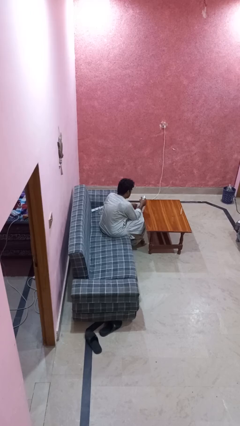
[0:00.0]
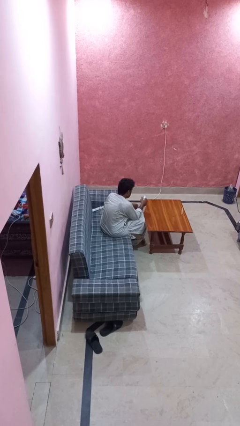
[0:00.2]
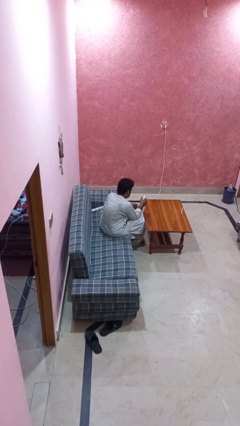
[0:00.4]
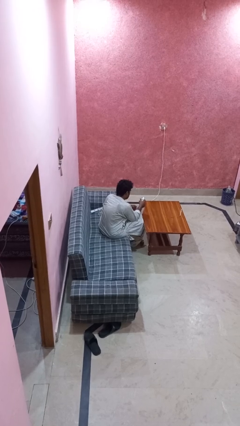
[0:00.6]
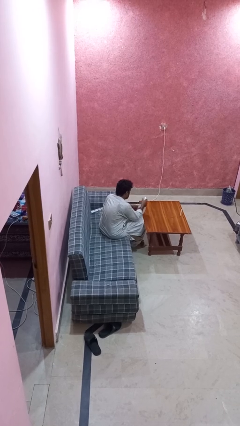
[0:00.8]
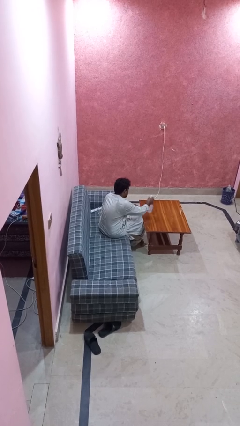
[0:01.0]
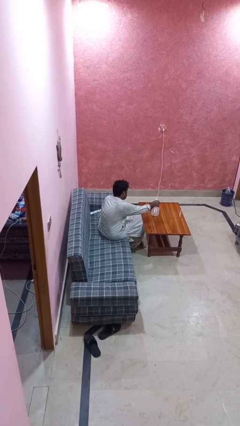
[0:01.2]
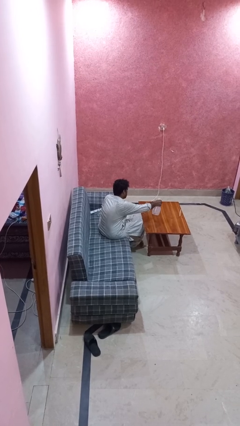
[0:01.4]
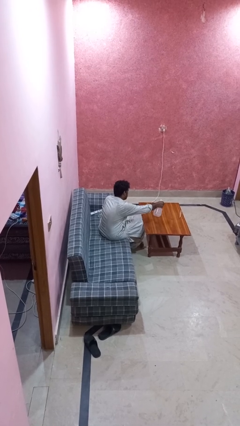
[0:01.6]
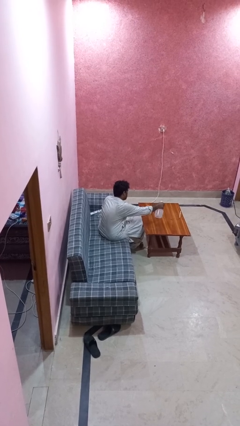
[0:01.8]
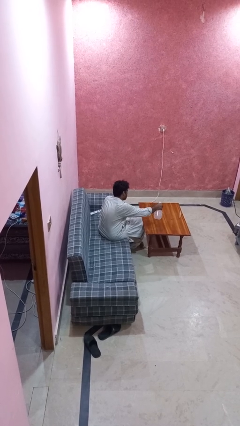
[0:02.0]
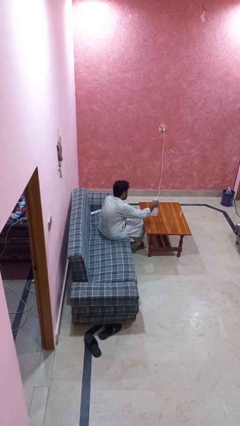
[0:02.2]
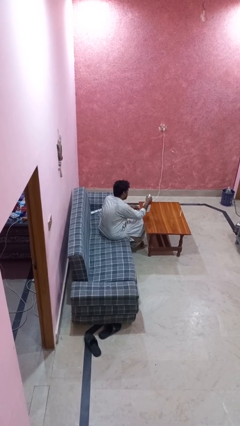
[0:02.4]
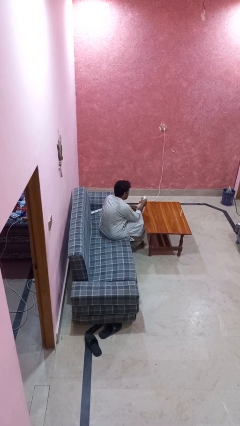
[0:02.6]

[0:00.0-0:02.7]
person sprays from bottle

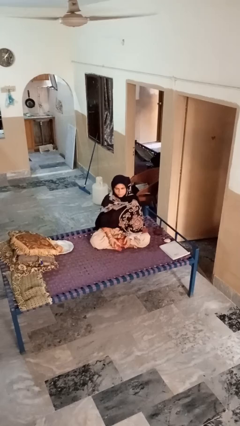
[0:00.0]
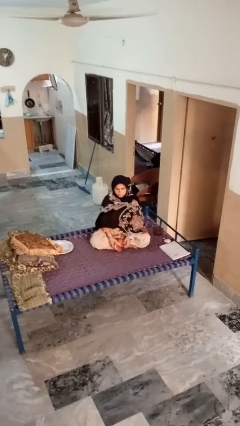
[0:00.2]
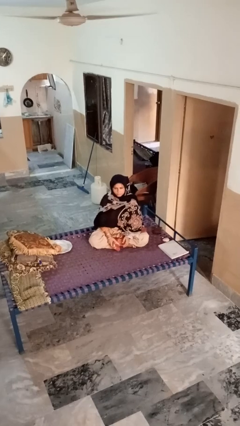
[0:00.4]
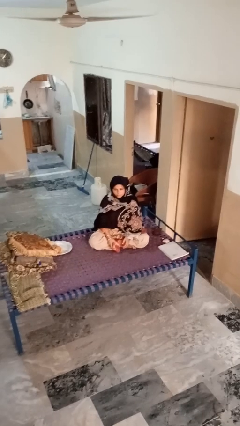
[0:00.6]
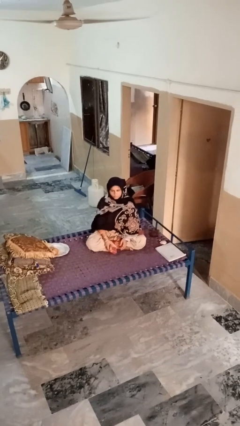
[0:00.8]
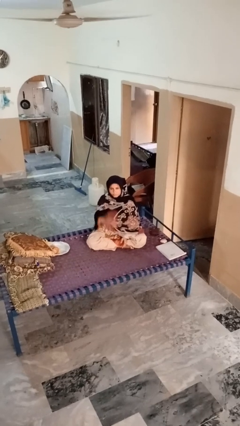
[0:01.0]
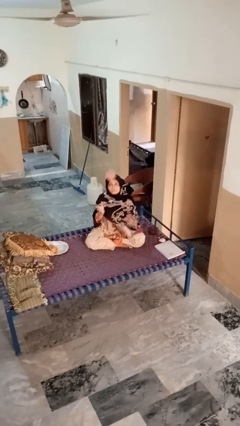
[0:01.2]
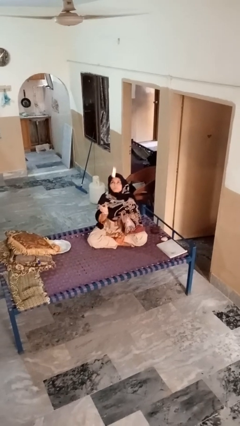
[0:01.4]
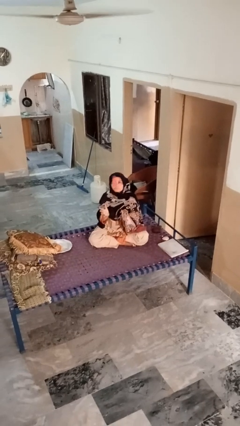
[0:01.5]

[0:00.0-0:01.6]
person drops object

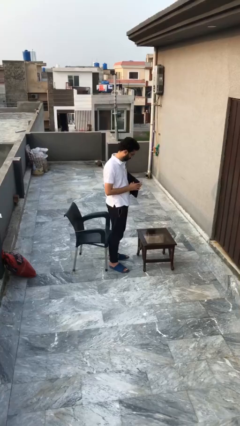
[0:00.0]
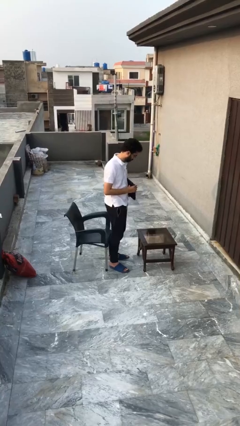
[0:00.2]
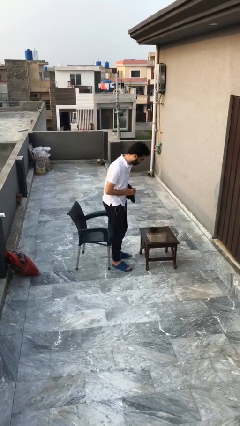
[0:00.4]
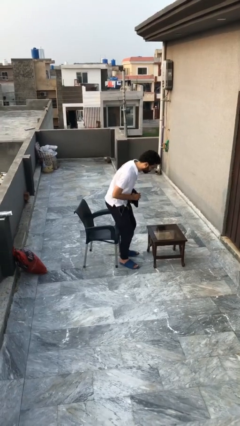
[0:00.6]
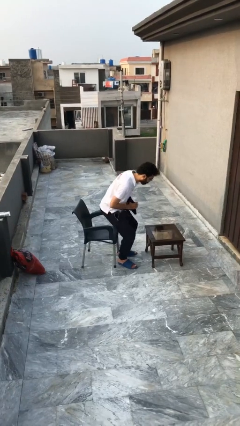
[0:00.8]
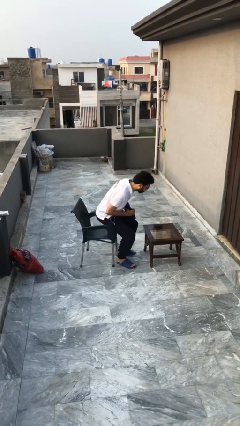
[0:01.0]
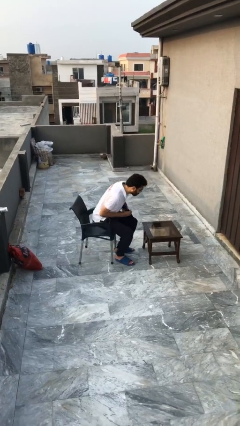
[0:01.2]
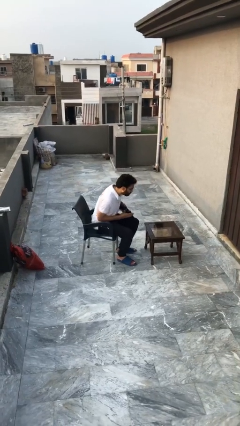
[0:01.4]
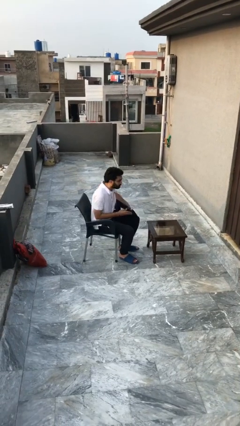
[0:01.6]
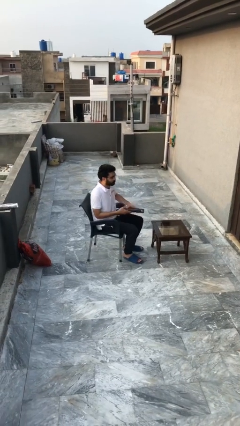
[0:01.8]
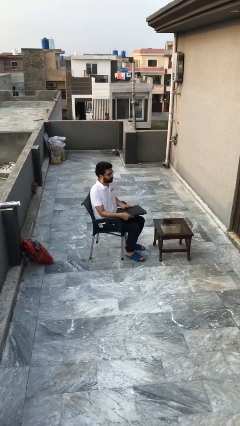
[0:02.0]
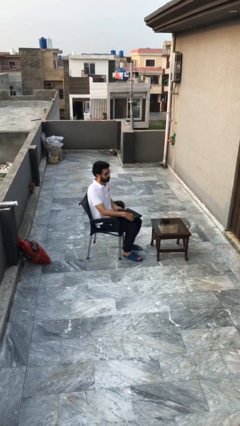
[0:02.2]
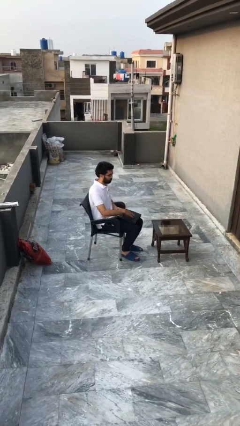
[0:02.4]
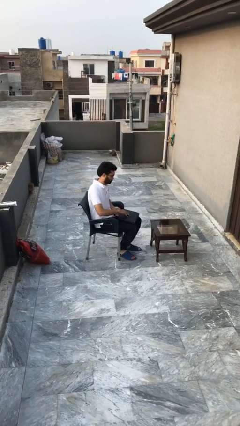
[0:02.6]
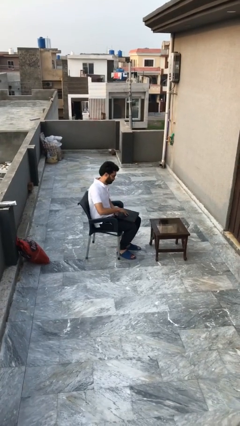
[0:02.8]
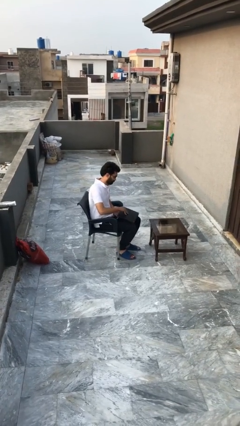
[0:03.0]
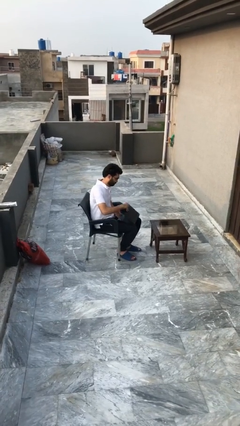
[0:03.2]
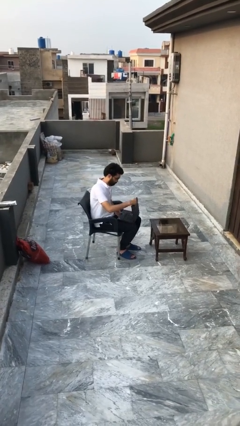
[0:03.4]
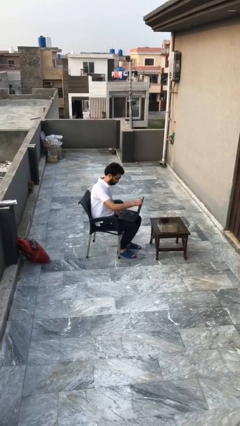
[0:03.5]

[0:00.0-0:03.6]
person sits down

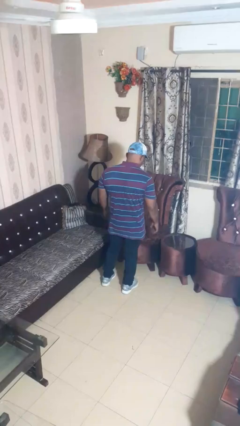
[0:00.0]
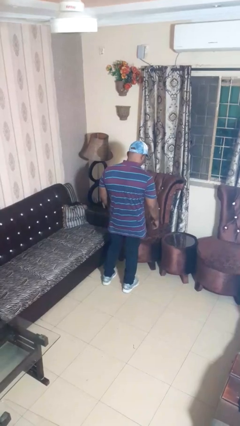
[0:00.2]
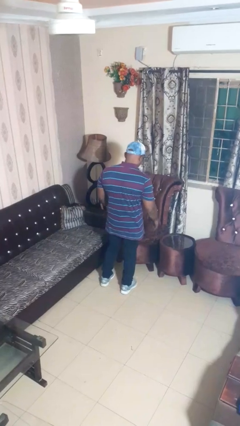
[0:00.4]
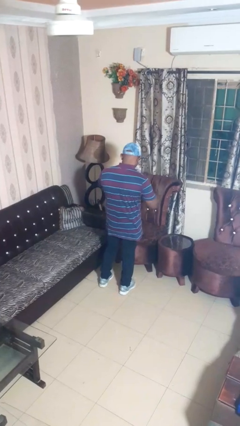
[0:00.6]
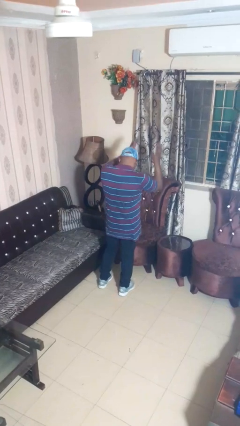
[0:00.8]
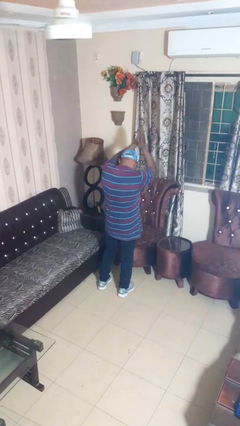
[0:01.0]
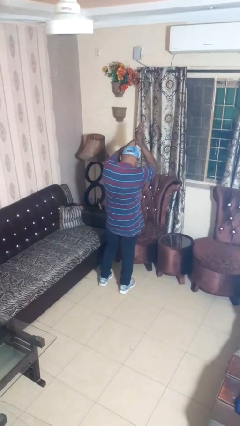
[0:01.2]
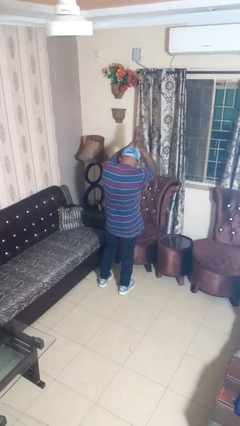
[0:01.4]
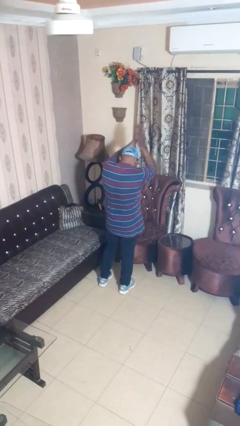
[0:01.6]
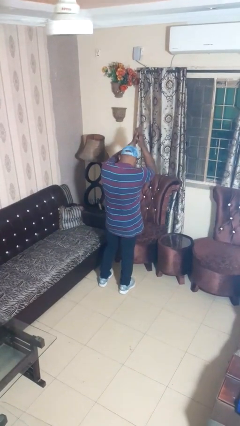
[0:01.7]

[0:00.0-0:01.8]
person claps hands

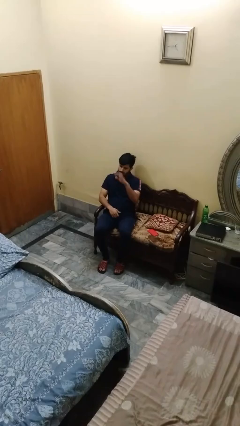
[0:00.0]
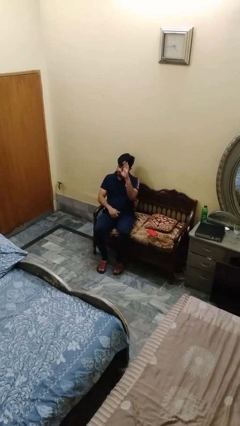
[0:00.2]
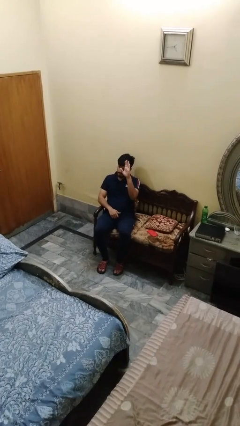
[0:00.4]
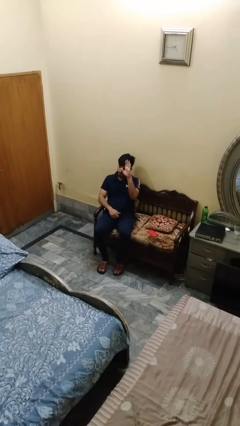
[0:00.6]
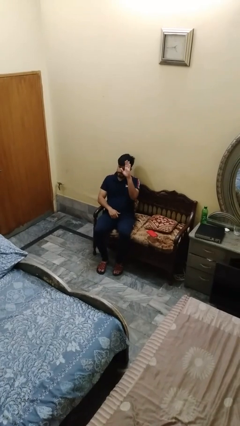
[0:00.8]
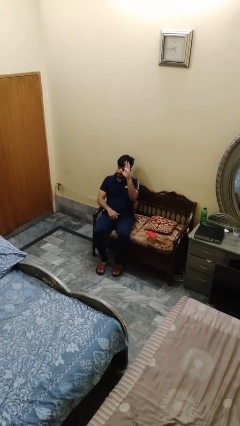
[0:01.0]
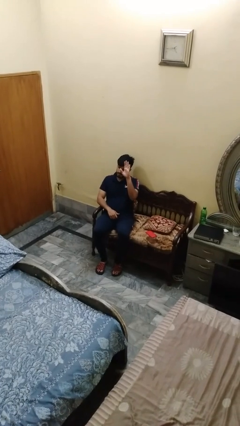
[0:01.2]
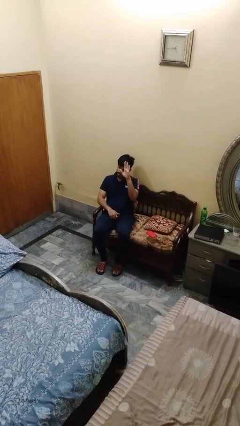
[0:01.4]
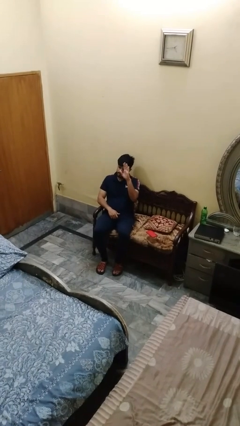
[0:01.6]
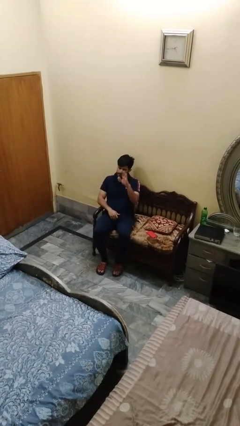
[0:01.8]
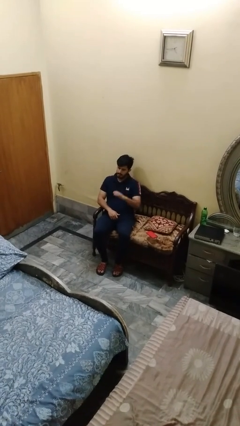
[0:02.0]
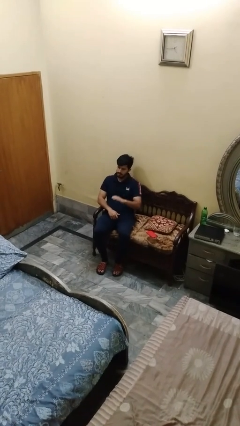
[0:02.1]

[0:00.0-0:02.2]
person gestures raise hand

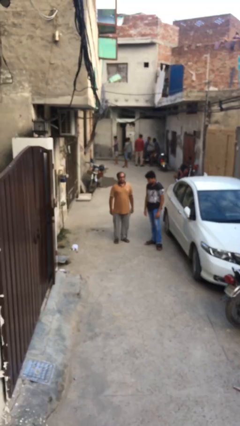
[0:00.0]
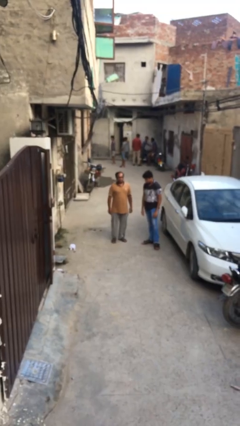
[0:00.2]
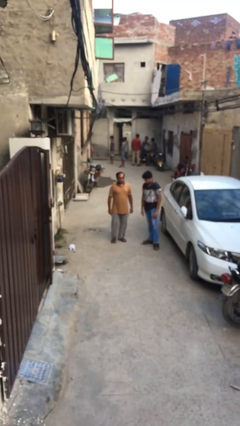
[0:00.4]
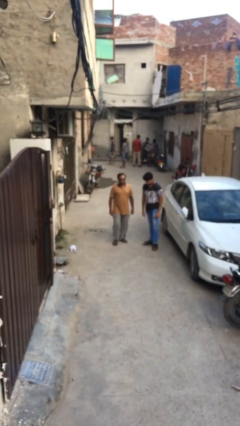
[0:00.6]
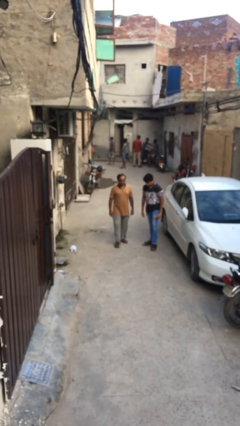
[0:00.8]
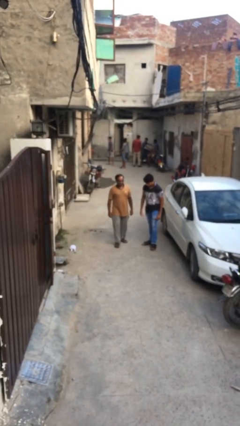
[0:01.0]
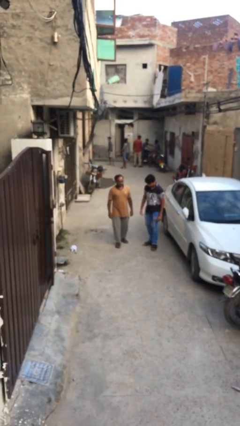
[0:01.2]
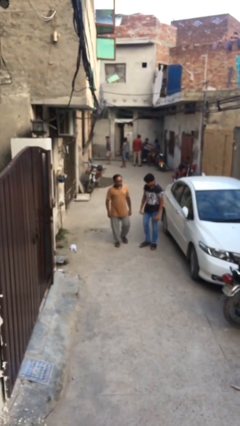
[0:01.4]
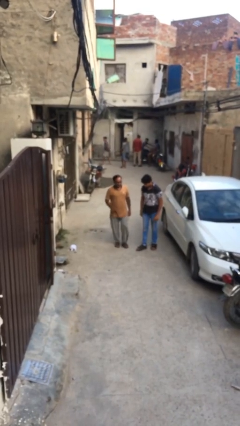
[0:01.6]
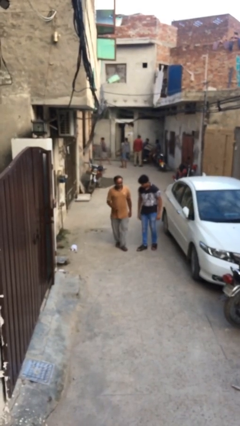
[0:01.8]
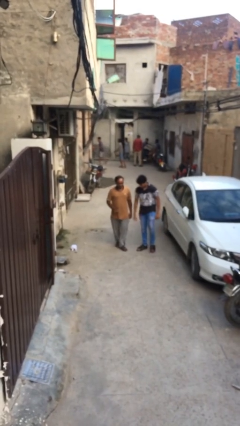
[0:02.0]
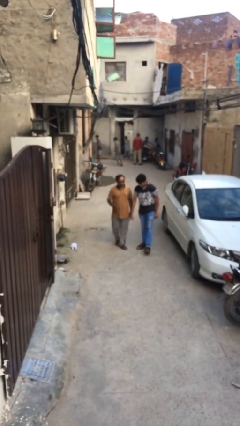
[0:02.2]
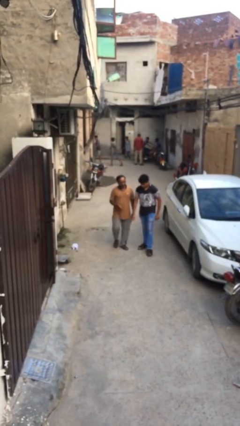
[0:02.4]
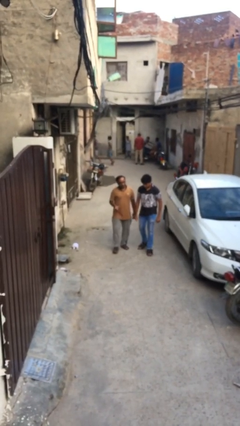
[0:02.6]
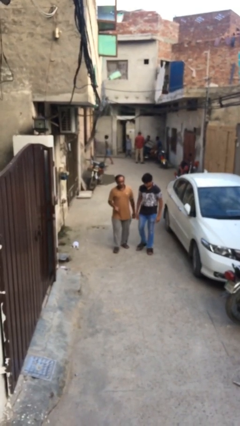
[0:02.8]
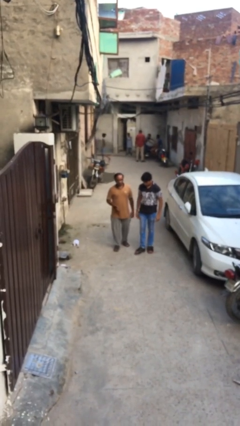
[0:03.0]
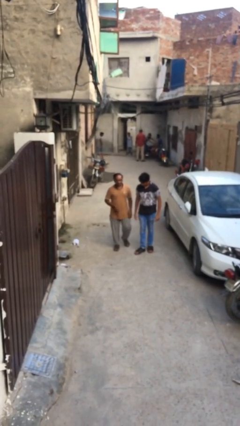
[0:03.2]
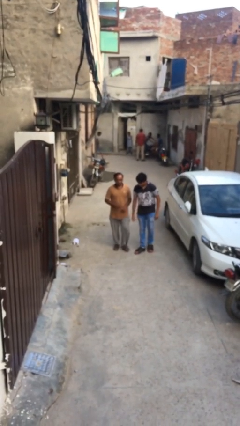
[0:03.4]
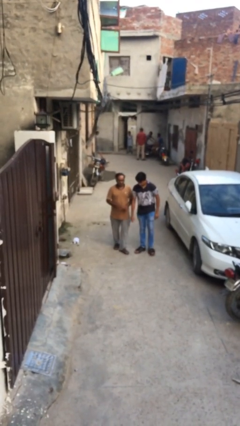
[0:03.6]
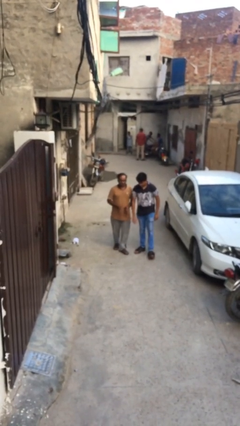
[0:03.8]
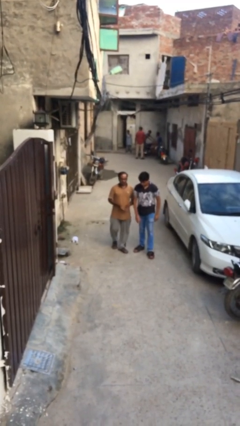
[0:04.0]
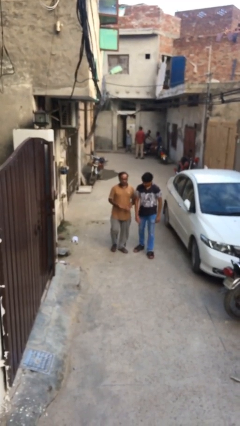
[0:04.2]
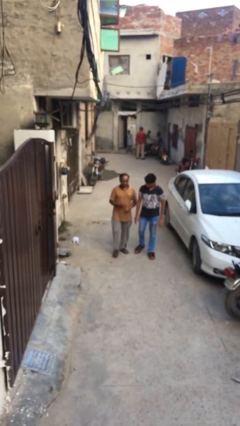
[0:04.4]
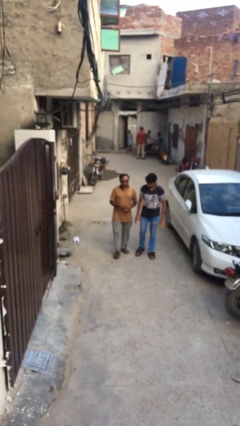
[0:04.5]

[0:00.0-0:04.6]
person talks to person

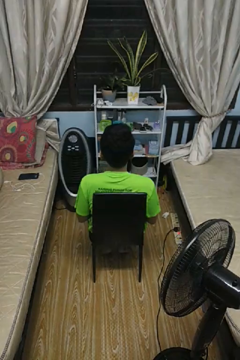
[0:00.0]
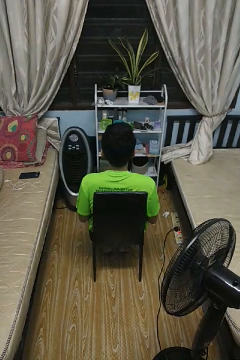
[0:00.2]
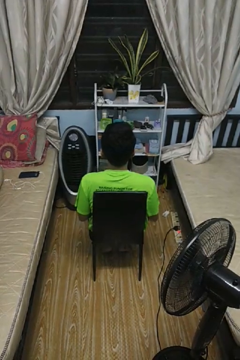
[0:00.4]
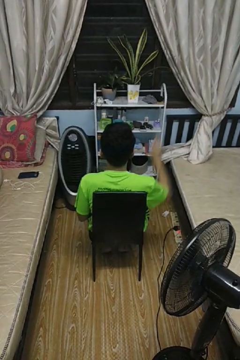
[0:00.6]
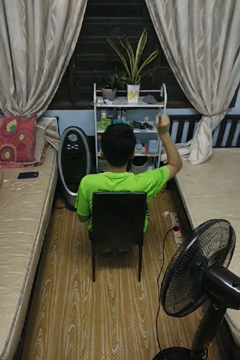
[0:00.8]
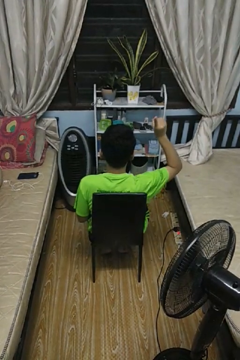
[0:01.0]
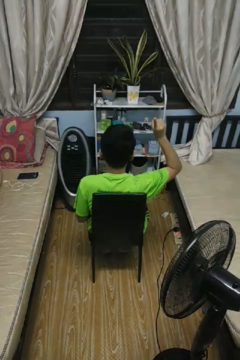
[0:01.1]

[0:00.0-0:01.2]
person gestures number one
